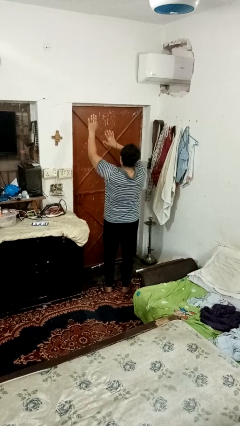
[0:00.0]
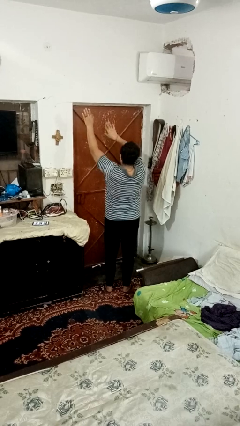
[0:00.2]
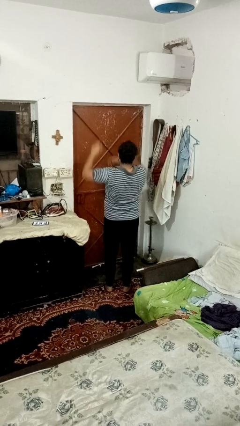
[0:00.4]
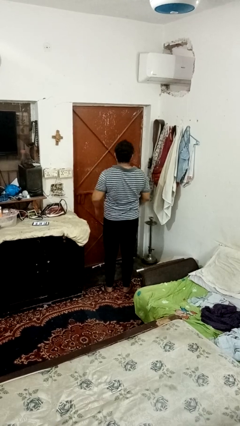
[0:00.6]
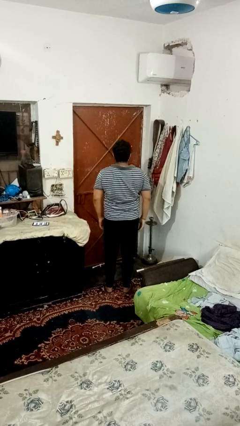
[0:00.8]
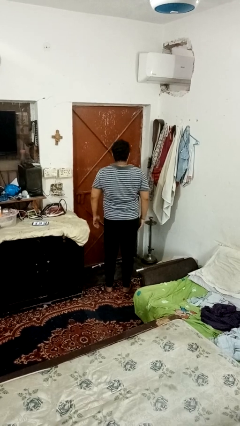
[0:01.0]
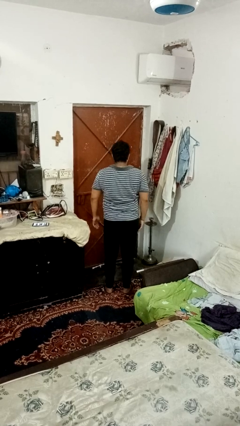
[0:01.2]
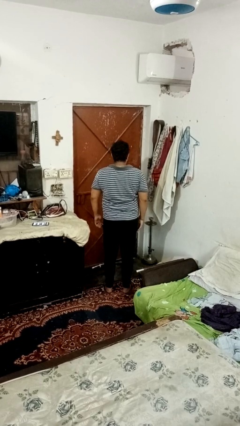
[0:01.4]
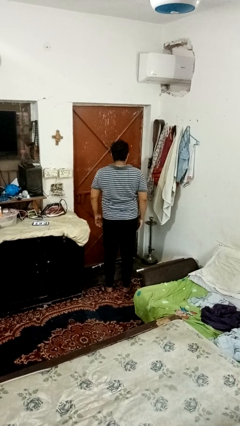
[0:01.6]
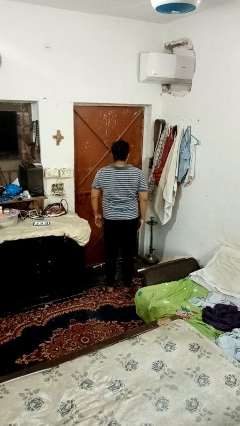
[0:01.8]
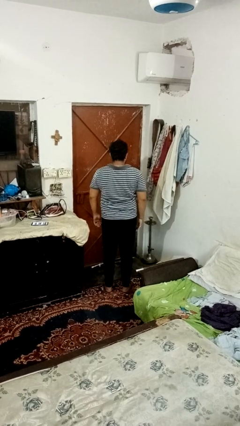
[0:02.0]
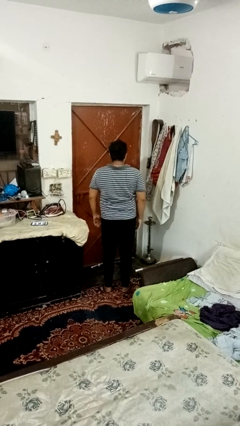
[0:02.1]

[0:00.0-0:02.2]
person dances in place

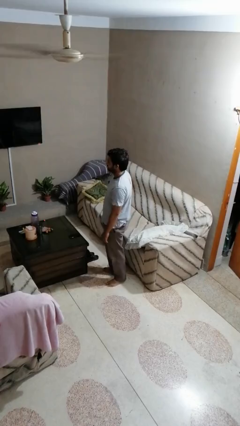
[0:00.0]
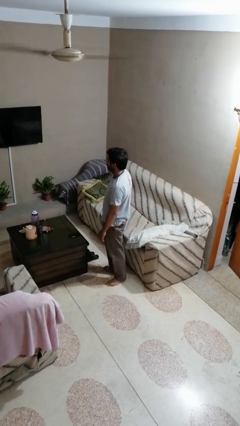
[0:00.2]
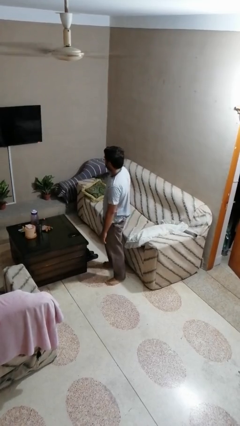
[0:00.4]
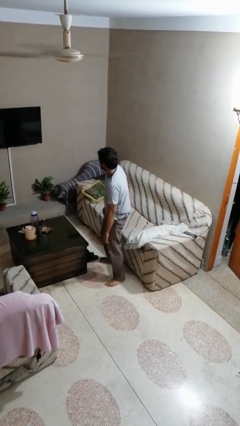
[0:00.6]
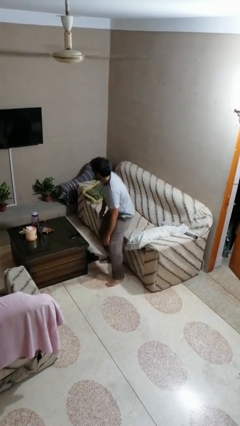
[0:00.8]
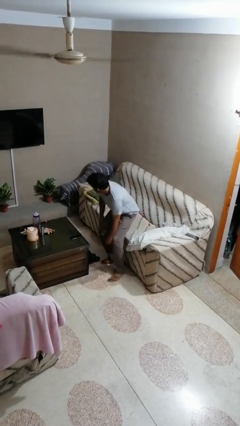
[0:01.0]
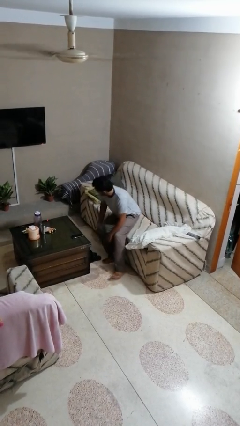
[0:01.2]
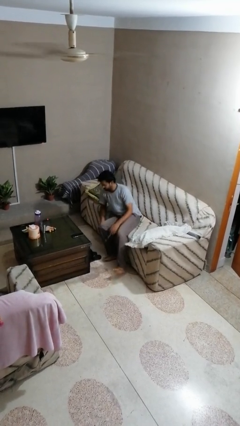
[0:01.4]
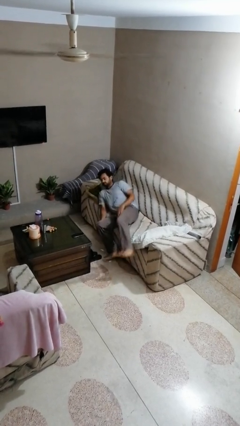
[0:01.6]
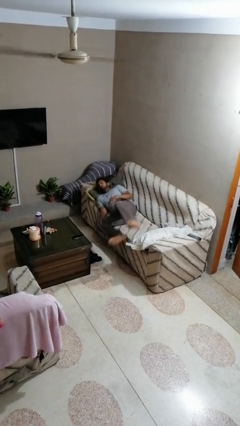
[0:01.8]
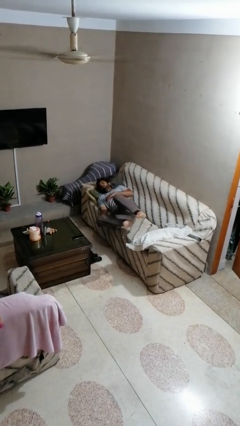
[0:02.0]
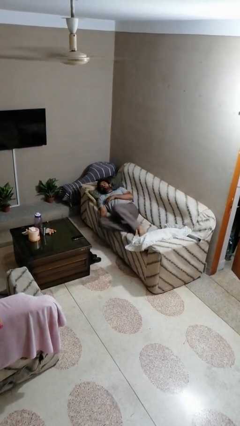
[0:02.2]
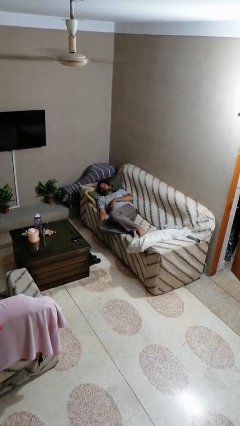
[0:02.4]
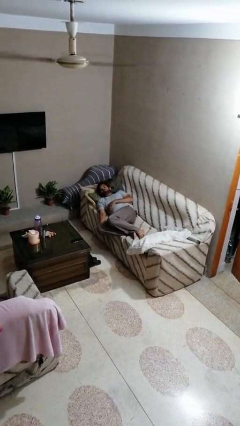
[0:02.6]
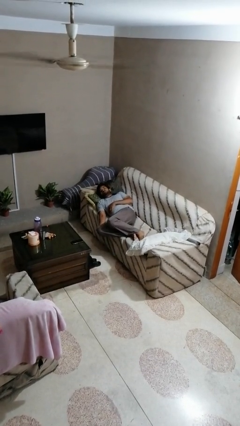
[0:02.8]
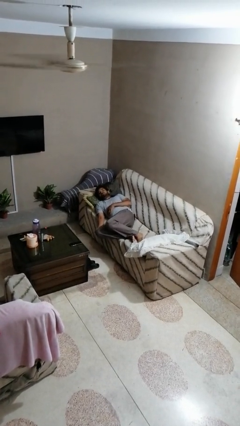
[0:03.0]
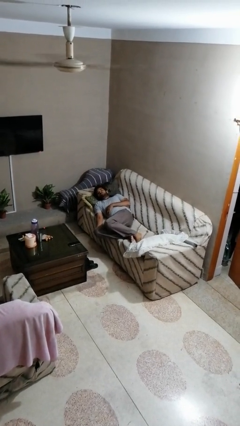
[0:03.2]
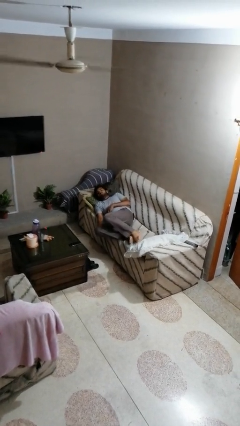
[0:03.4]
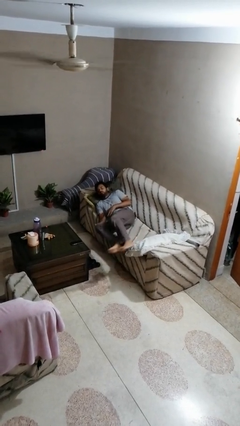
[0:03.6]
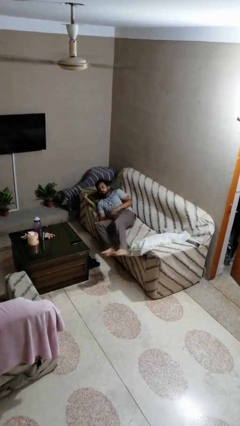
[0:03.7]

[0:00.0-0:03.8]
person lies down on couch

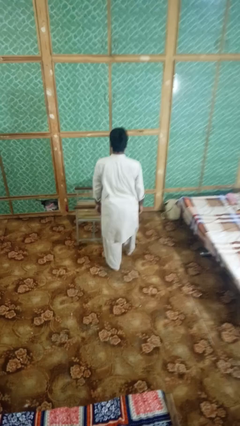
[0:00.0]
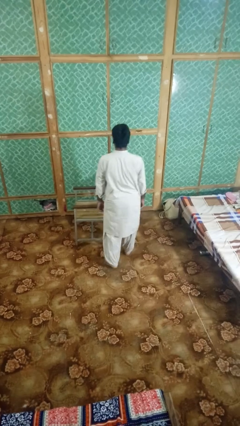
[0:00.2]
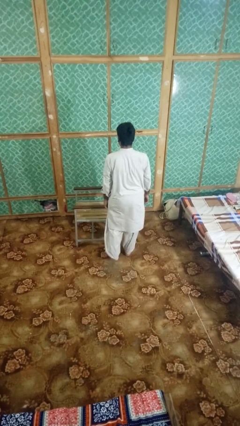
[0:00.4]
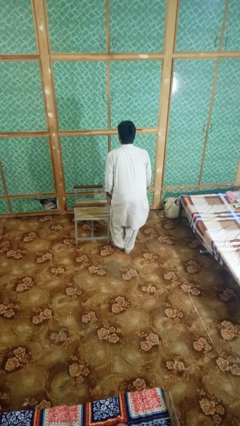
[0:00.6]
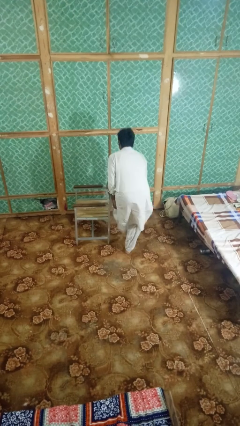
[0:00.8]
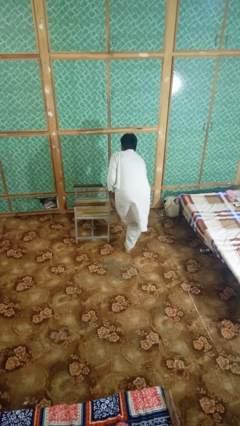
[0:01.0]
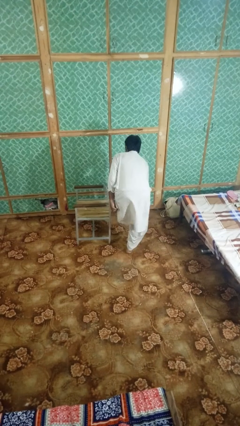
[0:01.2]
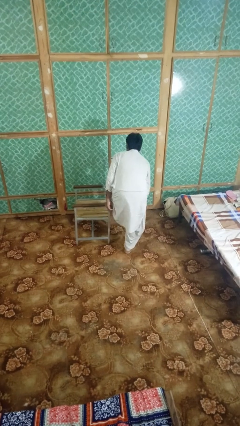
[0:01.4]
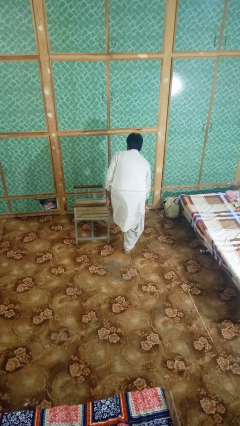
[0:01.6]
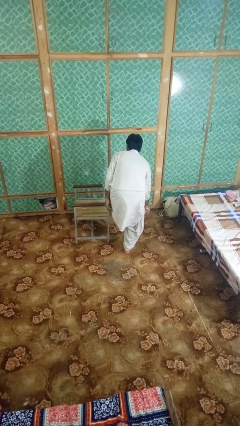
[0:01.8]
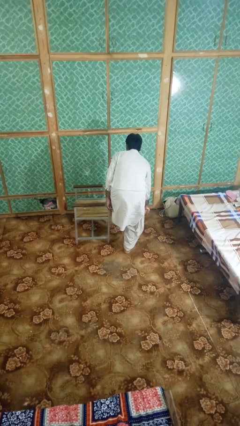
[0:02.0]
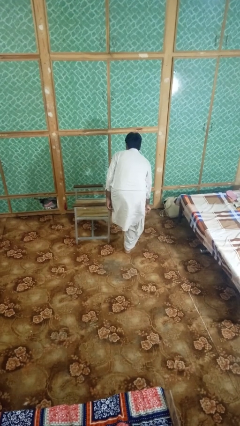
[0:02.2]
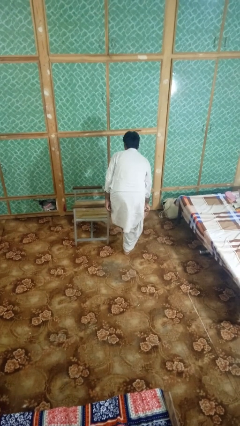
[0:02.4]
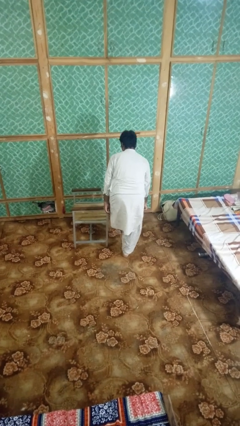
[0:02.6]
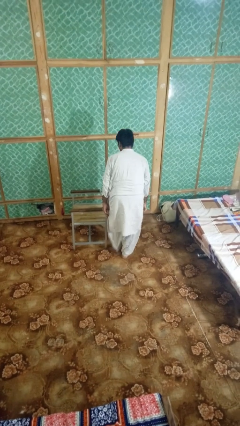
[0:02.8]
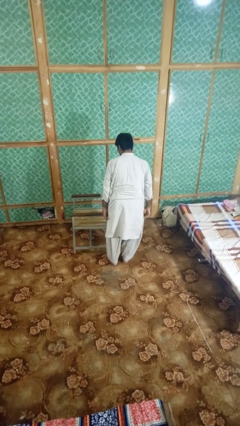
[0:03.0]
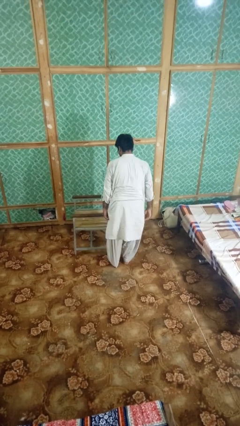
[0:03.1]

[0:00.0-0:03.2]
person stubs toe

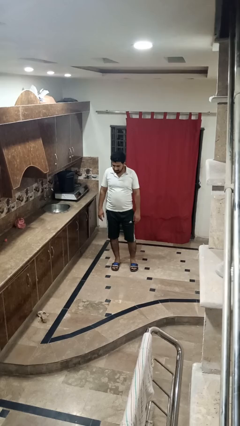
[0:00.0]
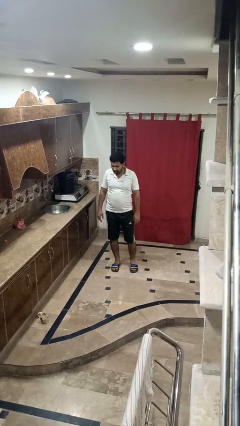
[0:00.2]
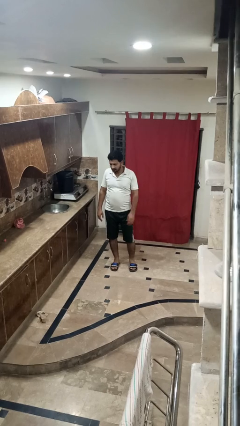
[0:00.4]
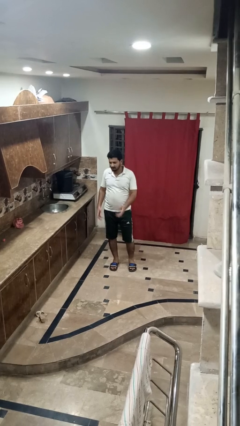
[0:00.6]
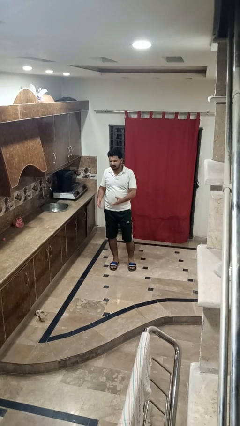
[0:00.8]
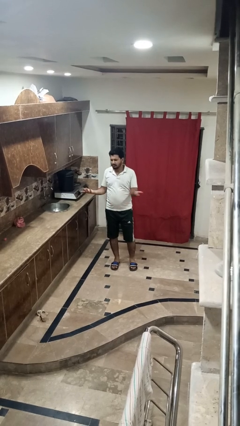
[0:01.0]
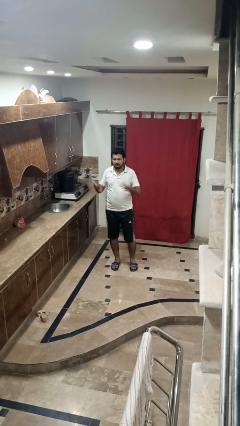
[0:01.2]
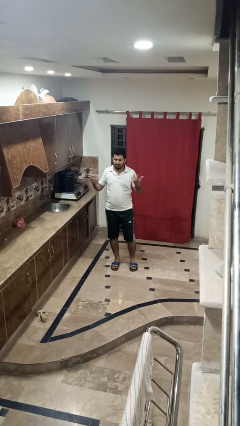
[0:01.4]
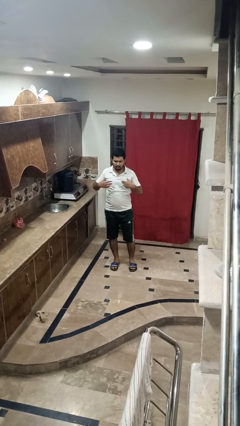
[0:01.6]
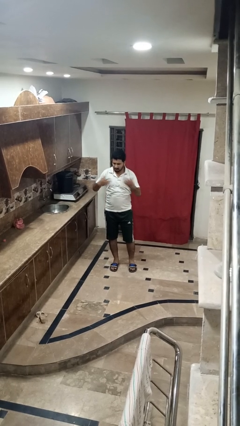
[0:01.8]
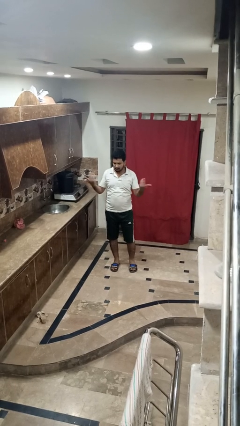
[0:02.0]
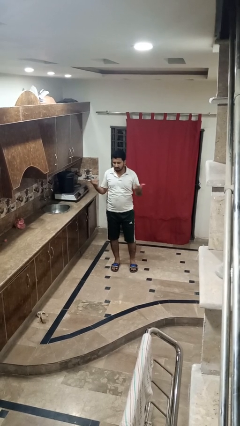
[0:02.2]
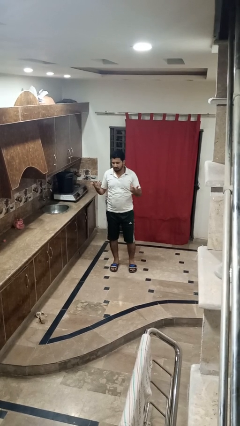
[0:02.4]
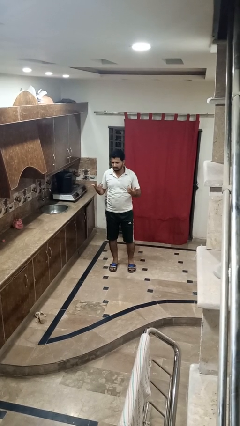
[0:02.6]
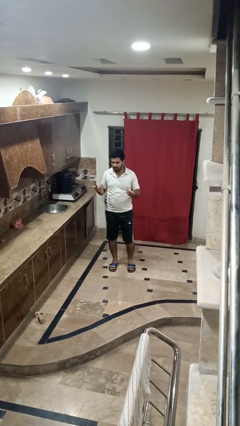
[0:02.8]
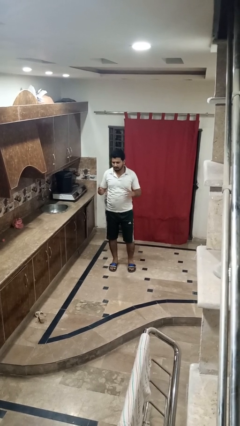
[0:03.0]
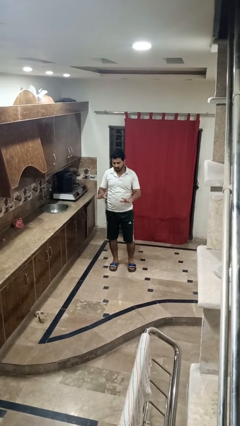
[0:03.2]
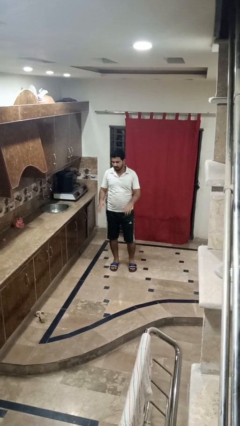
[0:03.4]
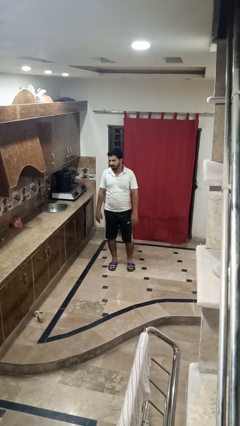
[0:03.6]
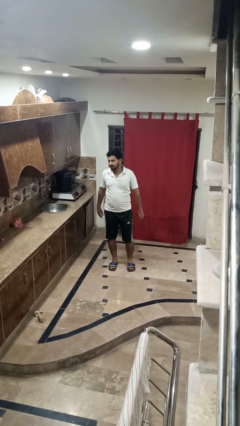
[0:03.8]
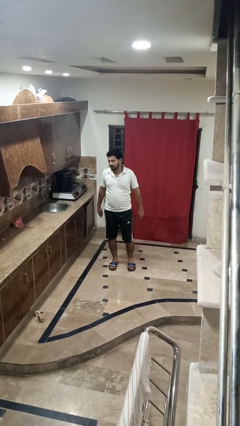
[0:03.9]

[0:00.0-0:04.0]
person shrugs

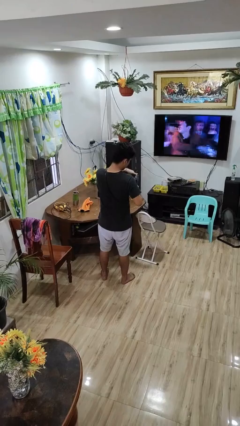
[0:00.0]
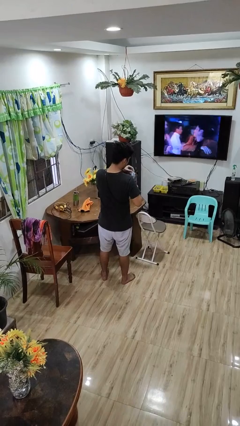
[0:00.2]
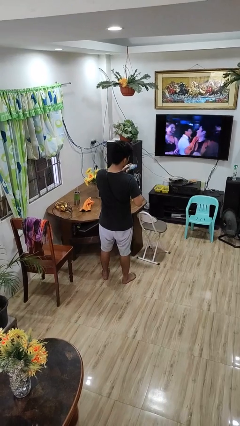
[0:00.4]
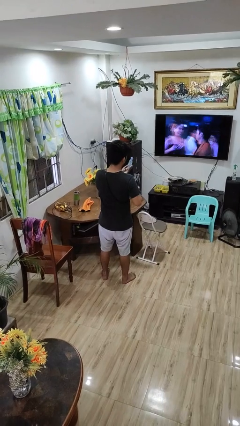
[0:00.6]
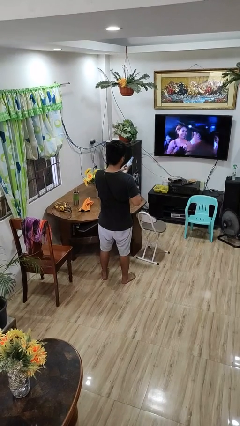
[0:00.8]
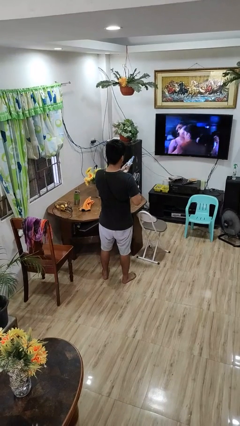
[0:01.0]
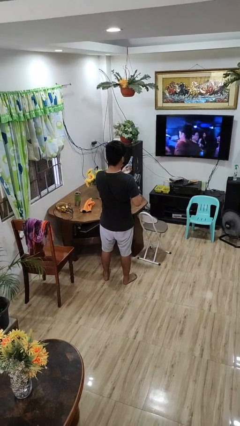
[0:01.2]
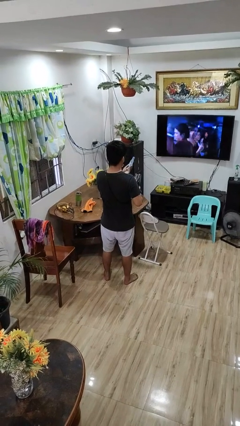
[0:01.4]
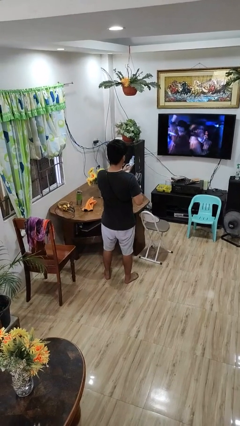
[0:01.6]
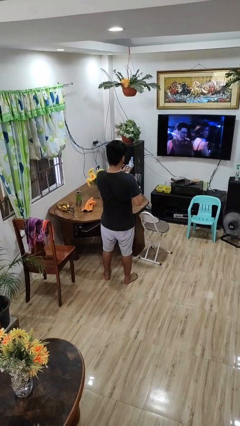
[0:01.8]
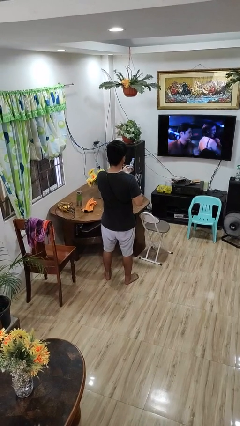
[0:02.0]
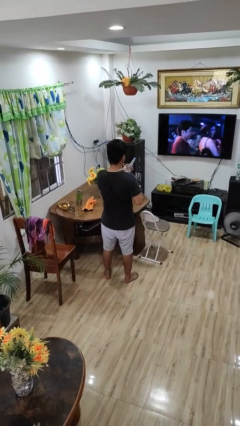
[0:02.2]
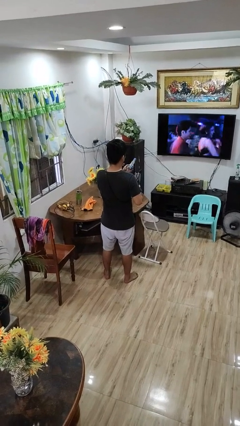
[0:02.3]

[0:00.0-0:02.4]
person takes object from purse

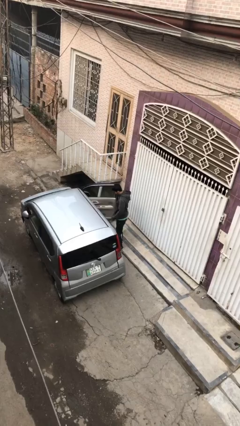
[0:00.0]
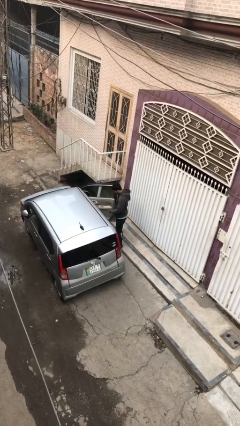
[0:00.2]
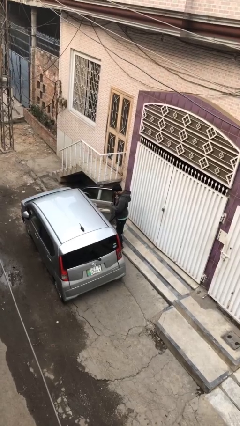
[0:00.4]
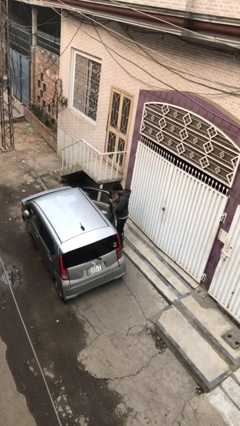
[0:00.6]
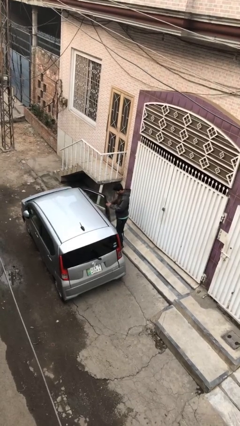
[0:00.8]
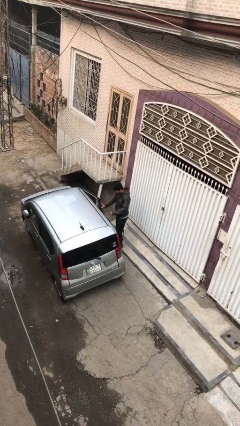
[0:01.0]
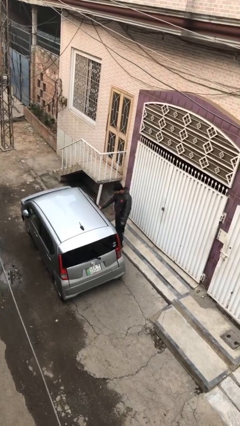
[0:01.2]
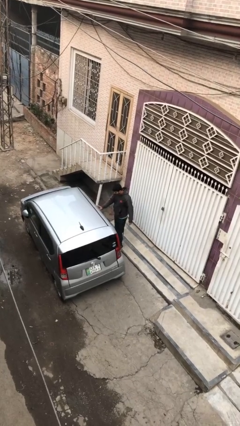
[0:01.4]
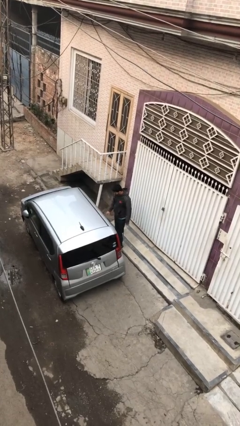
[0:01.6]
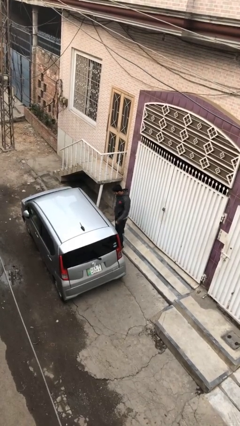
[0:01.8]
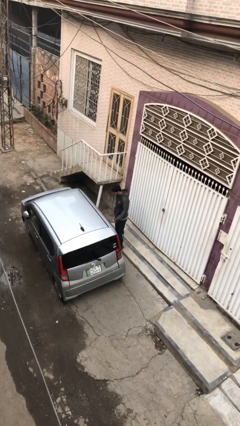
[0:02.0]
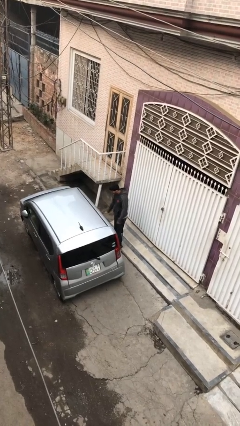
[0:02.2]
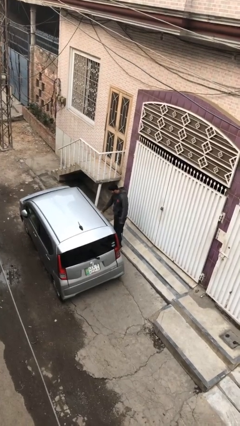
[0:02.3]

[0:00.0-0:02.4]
person closes car door
